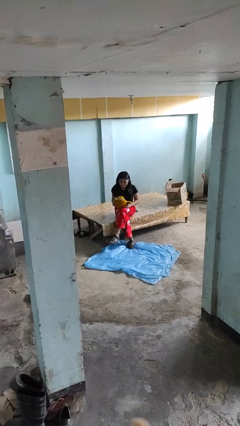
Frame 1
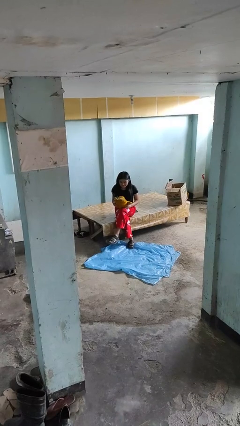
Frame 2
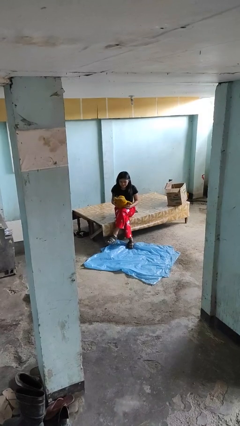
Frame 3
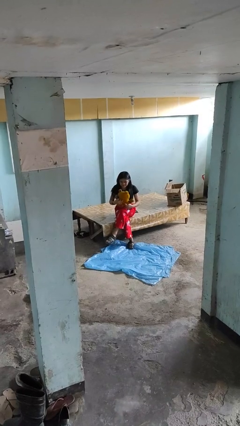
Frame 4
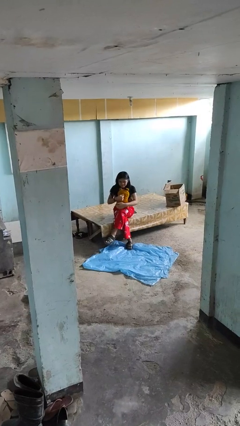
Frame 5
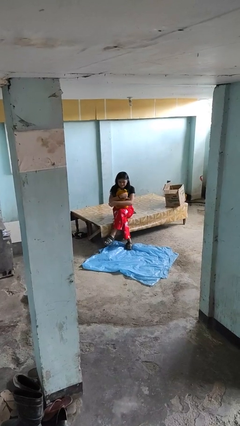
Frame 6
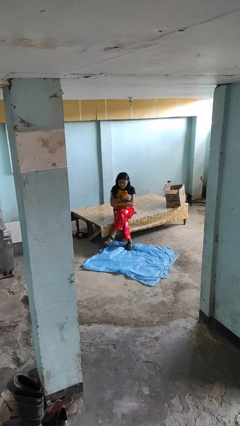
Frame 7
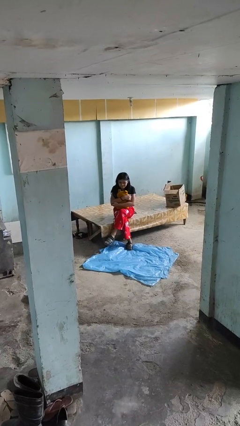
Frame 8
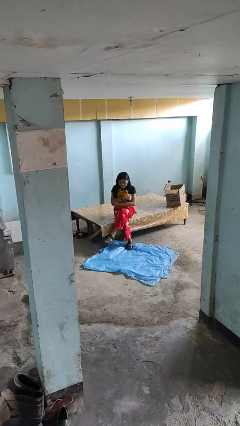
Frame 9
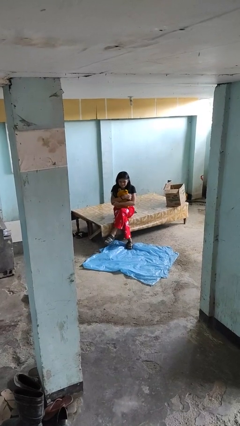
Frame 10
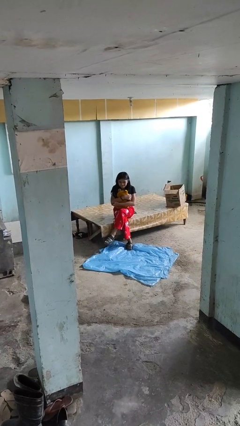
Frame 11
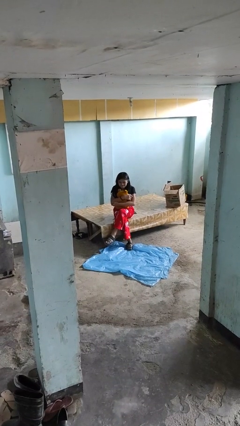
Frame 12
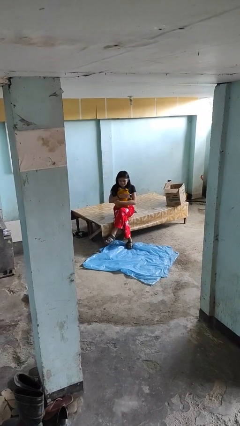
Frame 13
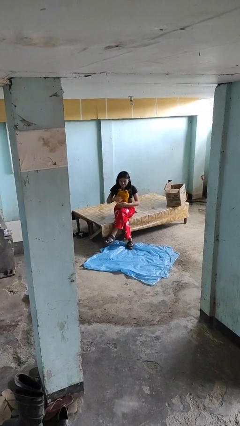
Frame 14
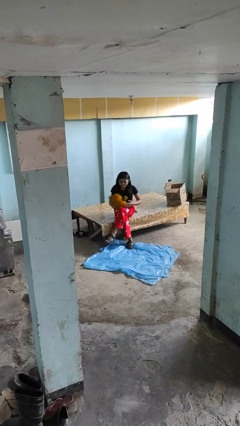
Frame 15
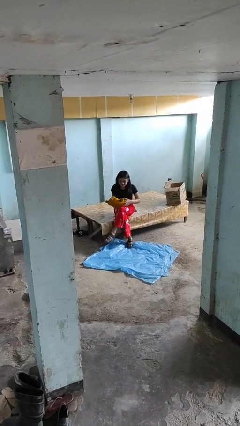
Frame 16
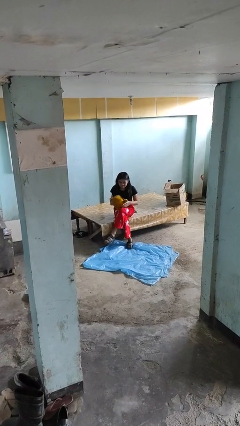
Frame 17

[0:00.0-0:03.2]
person hugs stuffed animal

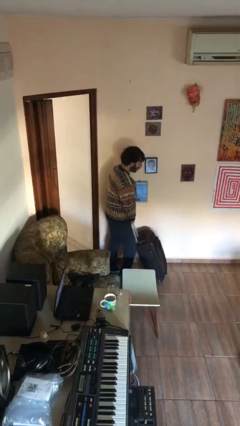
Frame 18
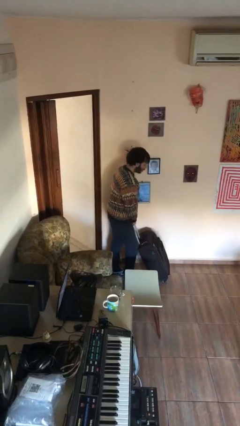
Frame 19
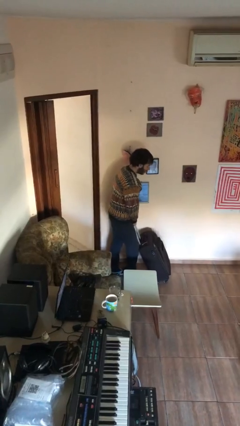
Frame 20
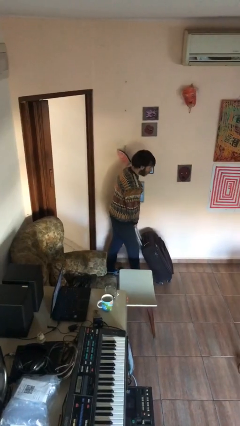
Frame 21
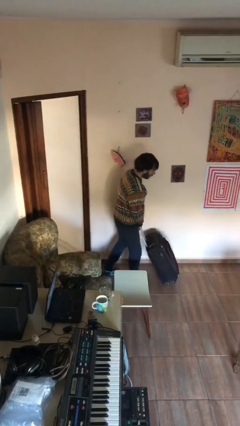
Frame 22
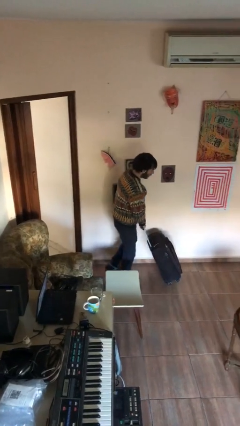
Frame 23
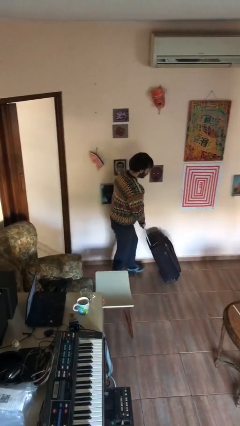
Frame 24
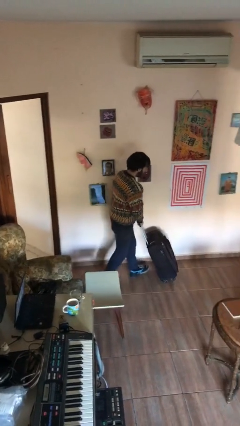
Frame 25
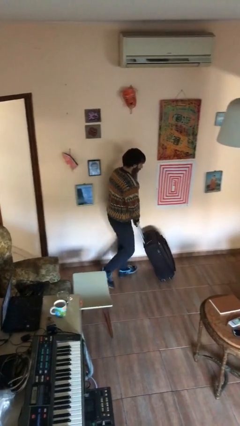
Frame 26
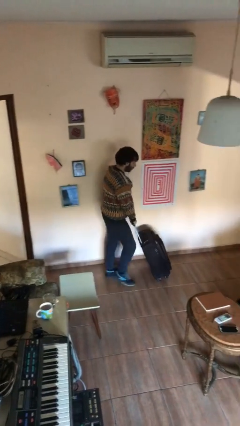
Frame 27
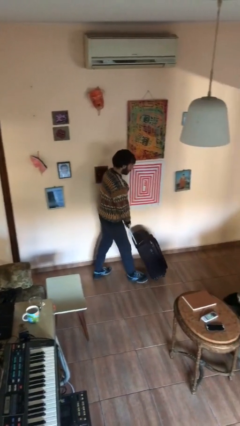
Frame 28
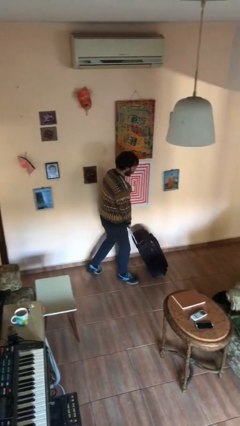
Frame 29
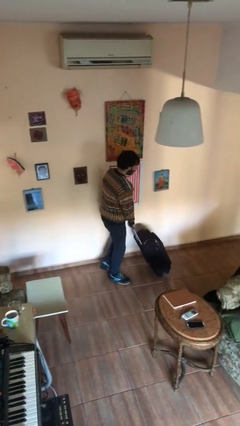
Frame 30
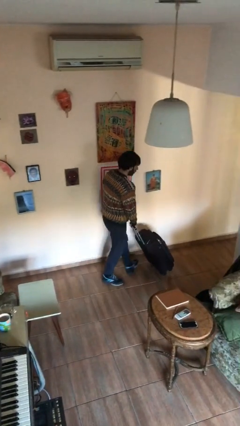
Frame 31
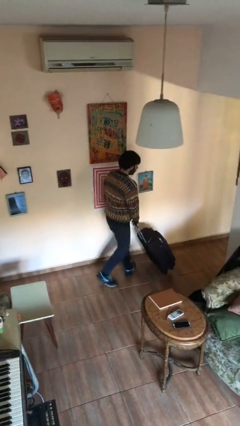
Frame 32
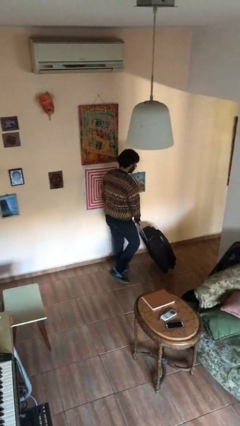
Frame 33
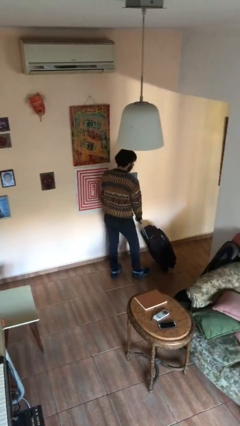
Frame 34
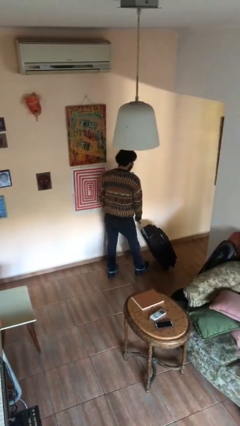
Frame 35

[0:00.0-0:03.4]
person pushes wheeled cart

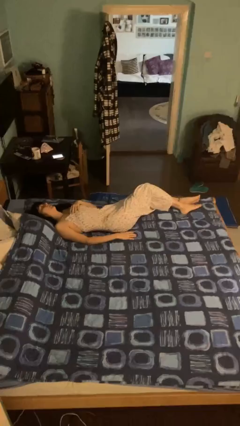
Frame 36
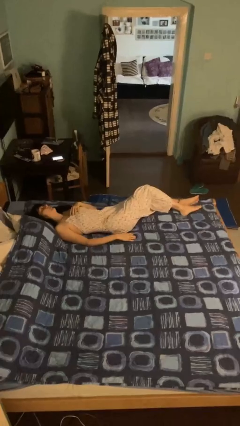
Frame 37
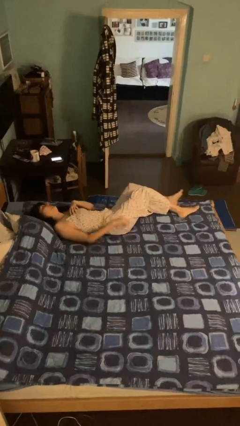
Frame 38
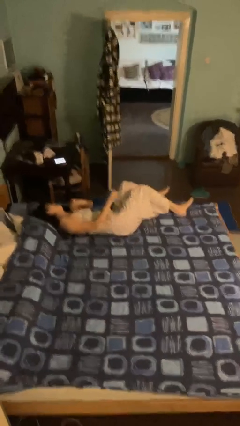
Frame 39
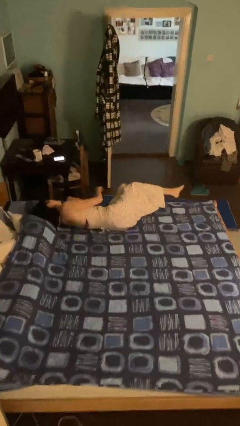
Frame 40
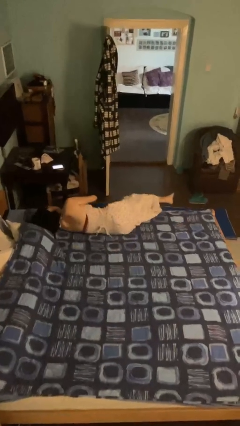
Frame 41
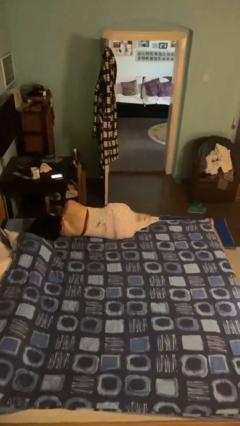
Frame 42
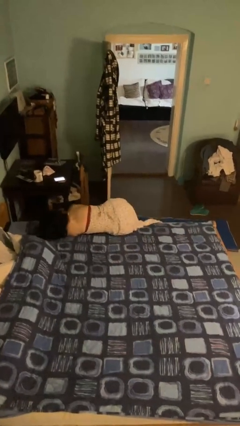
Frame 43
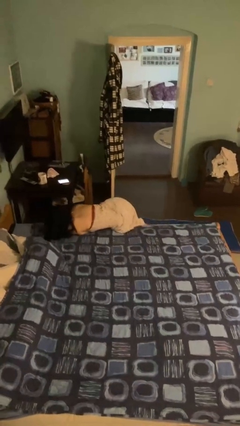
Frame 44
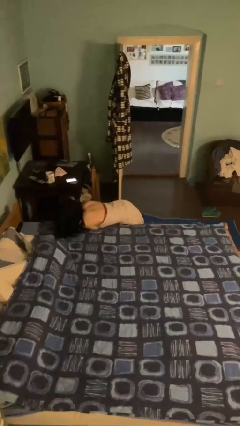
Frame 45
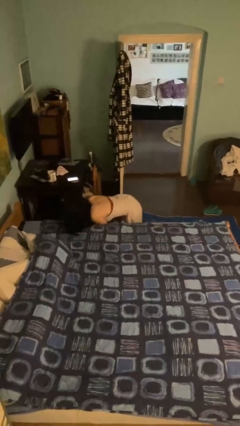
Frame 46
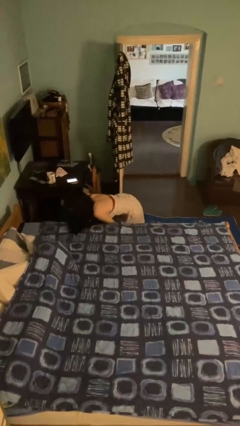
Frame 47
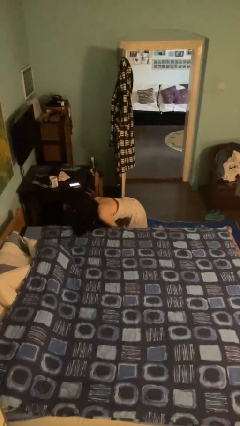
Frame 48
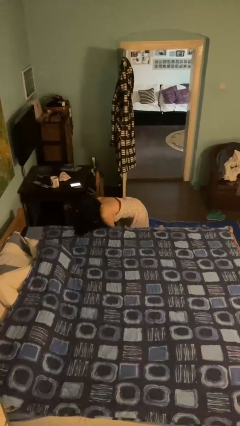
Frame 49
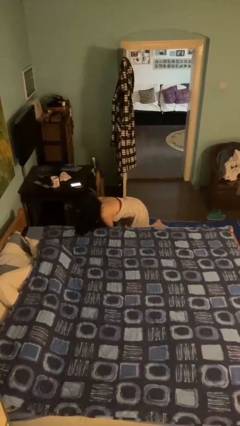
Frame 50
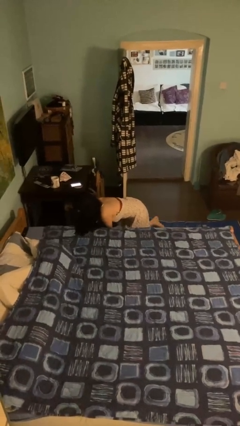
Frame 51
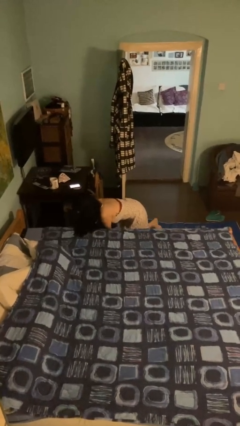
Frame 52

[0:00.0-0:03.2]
person falls from bed

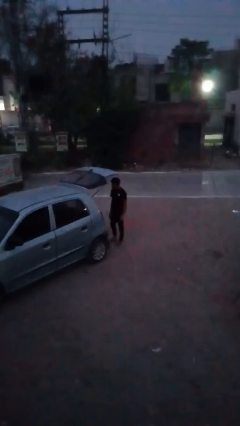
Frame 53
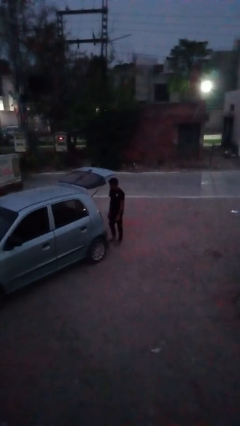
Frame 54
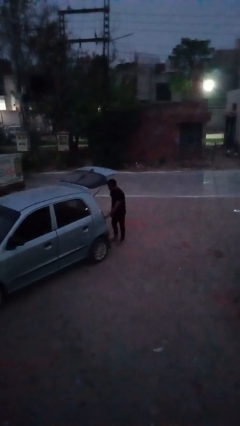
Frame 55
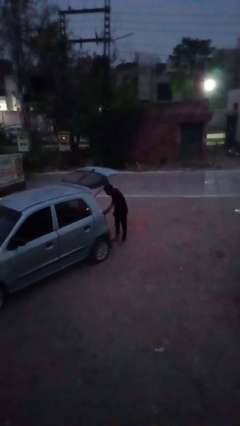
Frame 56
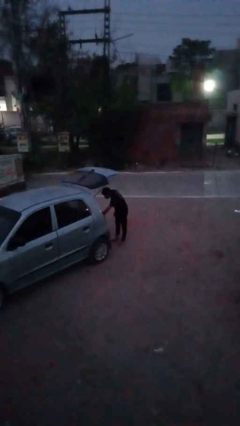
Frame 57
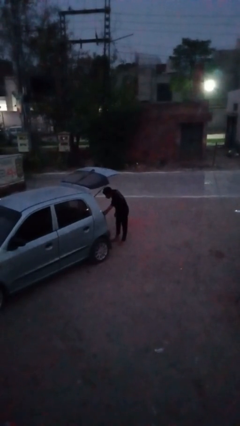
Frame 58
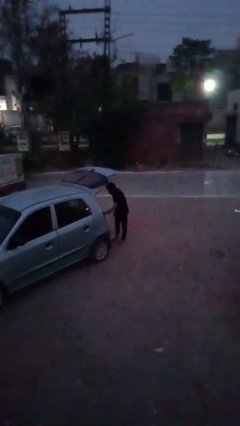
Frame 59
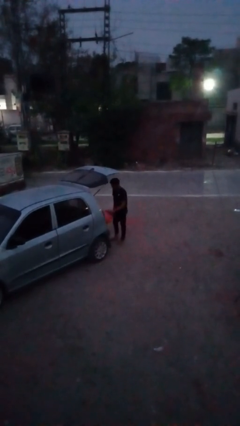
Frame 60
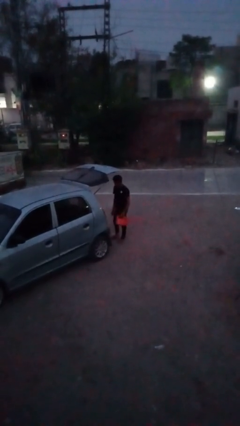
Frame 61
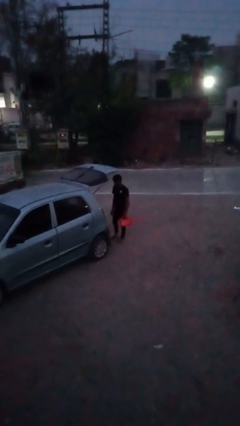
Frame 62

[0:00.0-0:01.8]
person unloads car

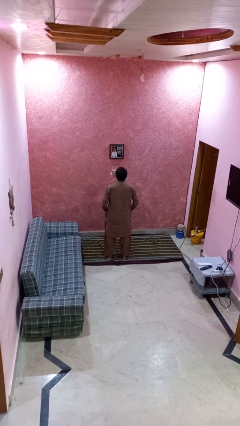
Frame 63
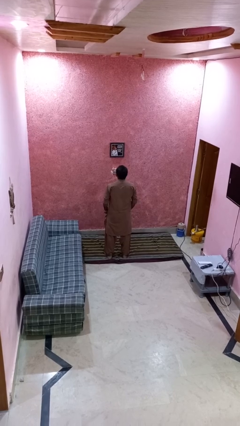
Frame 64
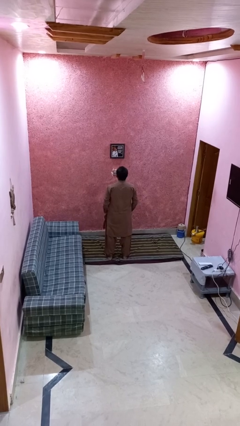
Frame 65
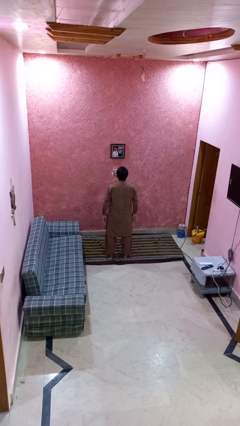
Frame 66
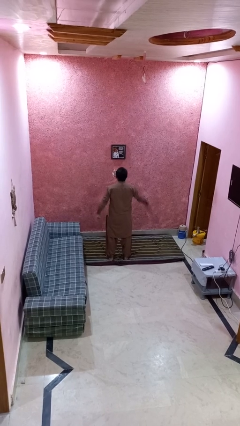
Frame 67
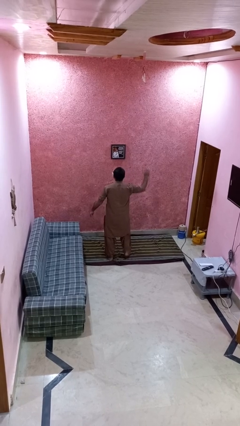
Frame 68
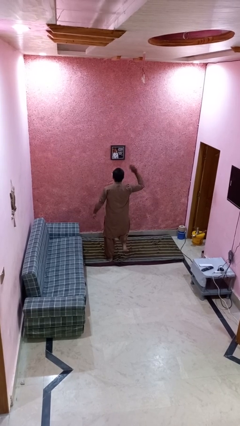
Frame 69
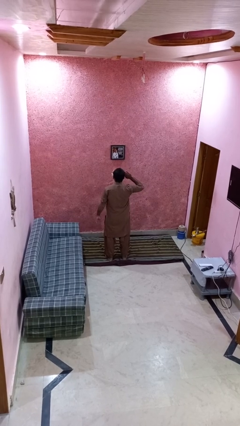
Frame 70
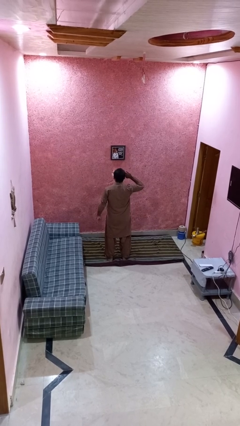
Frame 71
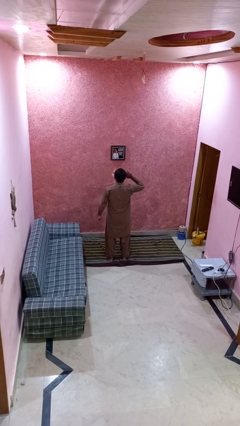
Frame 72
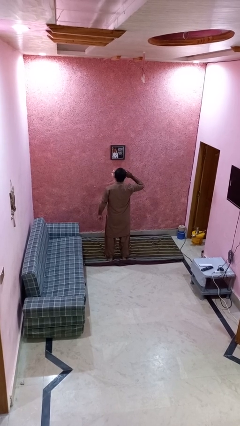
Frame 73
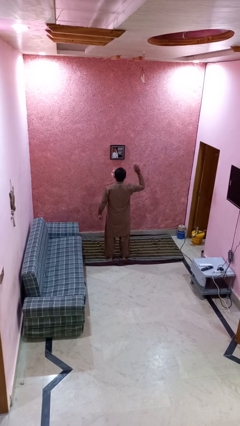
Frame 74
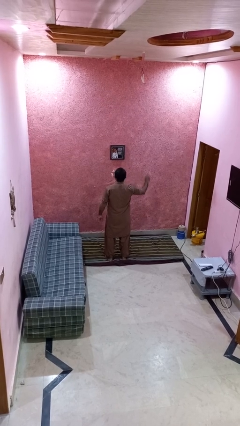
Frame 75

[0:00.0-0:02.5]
person salutes

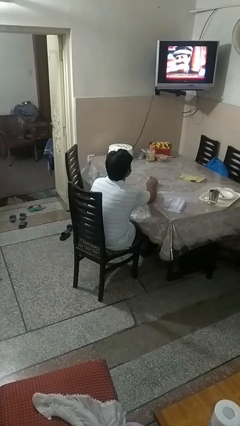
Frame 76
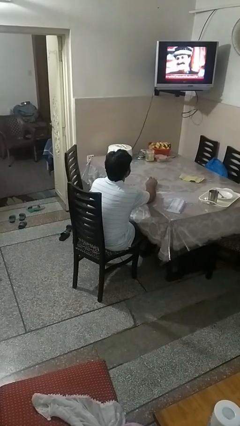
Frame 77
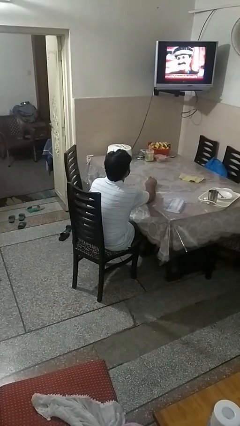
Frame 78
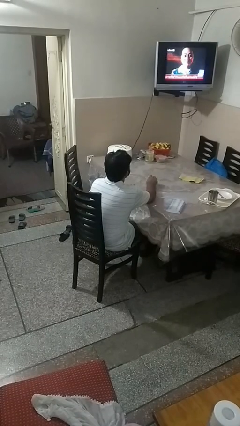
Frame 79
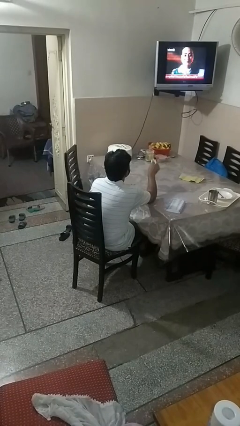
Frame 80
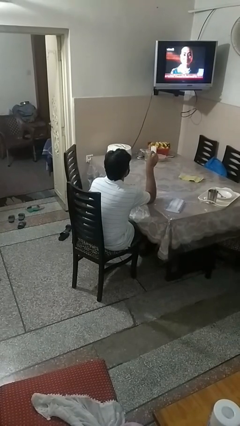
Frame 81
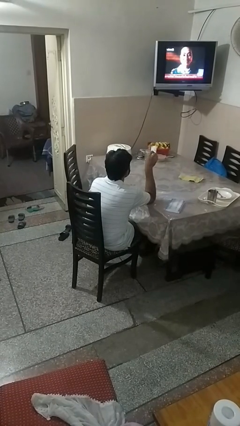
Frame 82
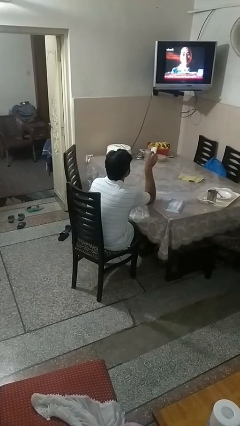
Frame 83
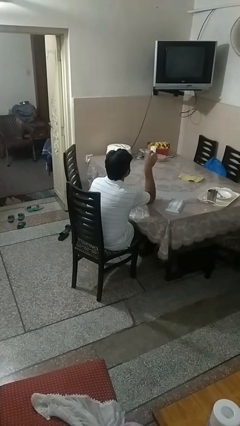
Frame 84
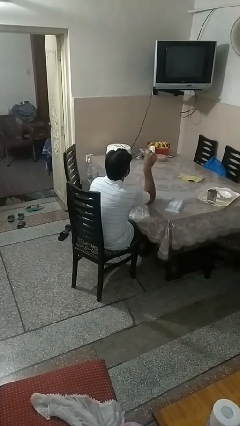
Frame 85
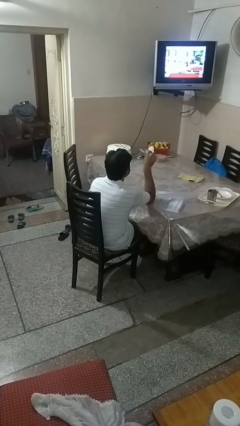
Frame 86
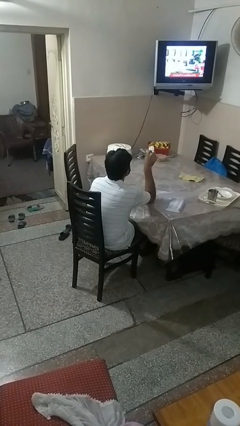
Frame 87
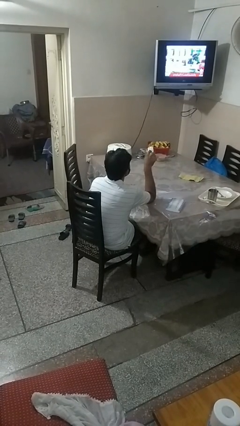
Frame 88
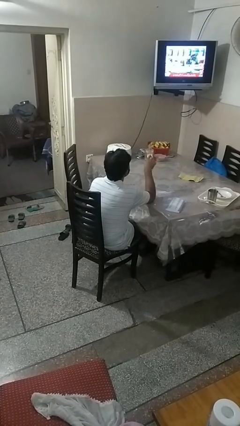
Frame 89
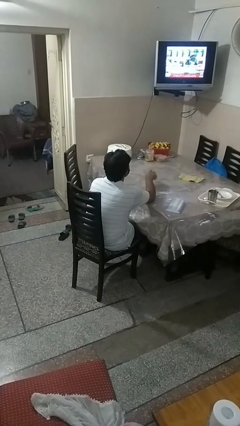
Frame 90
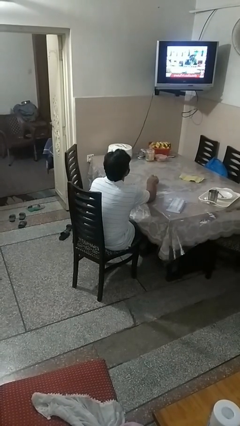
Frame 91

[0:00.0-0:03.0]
person uses television remote

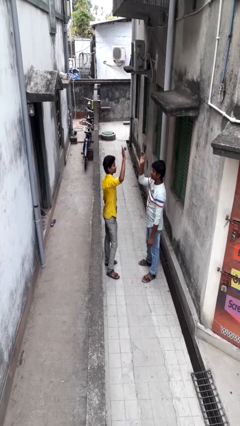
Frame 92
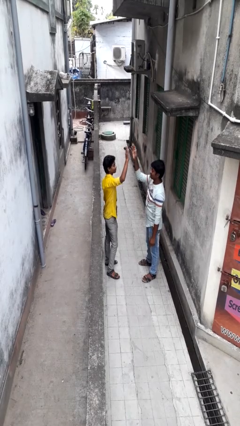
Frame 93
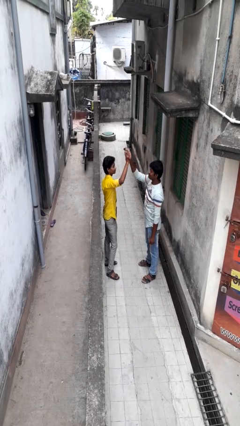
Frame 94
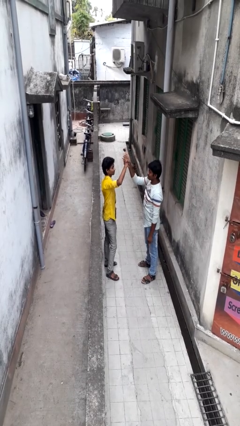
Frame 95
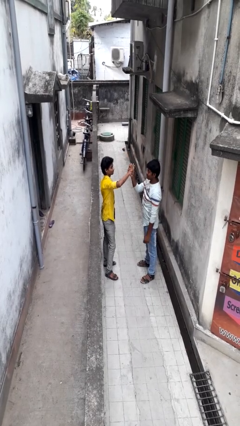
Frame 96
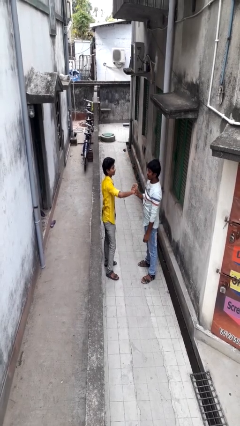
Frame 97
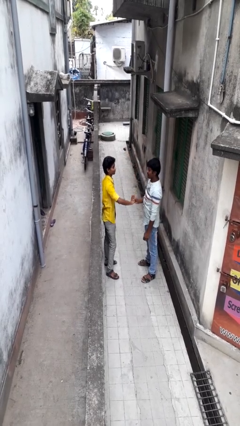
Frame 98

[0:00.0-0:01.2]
person highfives hand
